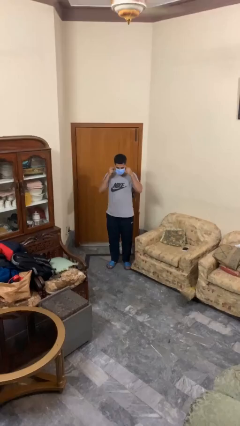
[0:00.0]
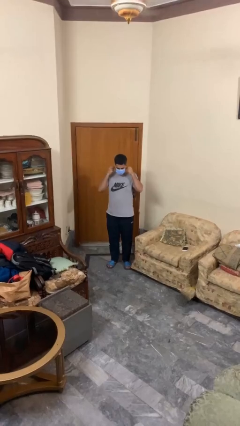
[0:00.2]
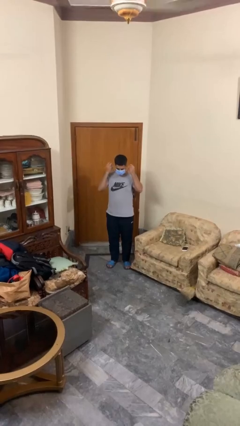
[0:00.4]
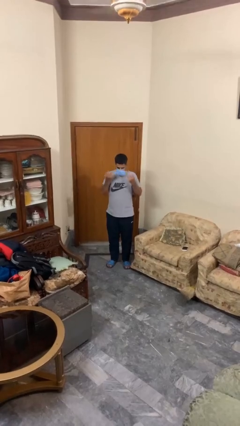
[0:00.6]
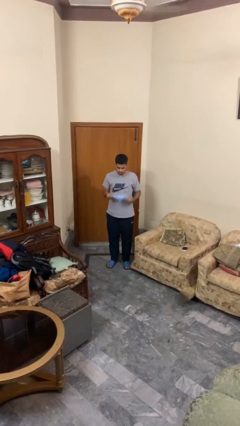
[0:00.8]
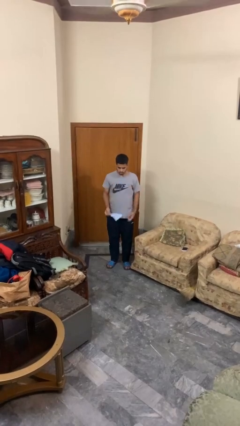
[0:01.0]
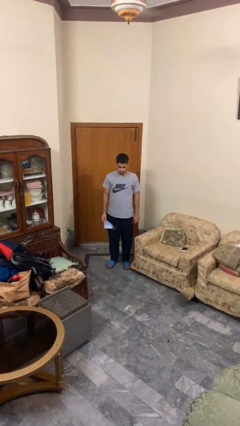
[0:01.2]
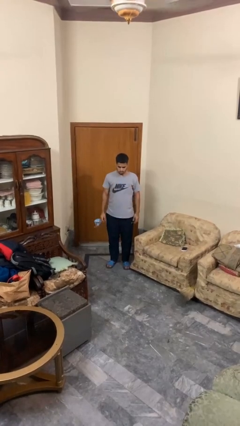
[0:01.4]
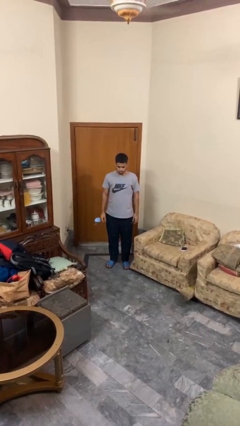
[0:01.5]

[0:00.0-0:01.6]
person takes off facemask

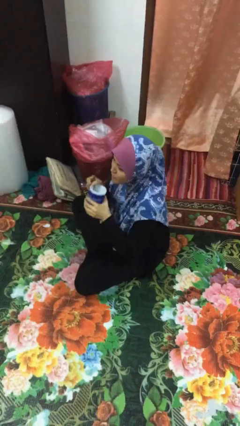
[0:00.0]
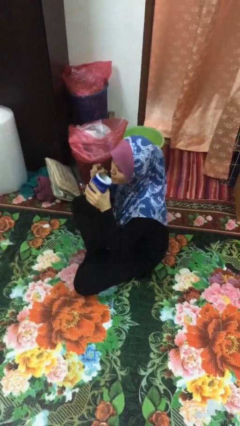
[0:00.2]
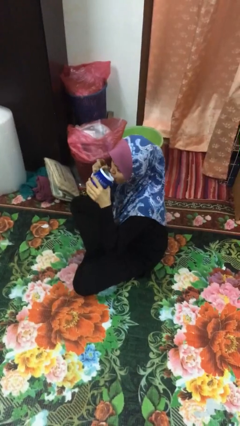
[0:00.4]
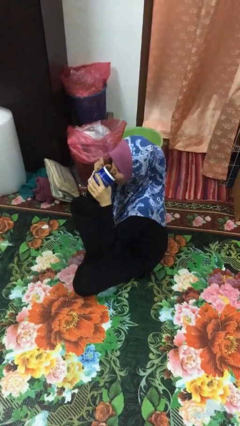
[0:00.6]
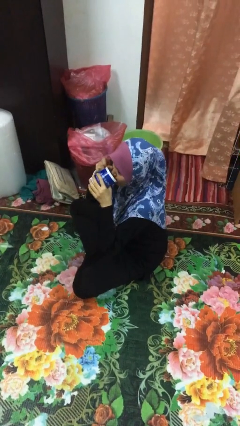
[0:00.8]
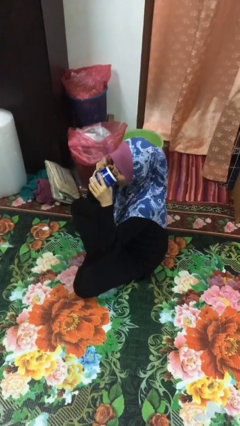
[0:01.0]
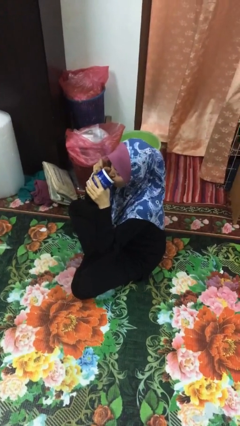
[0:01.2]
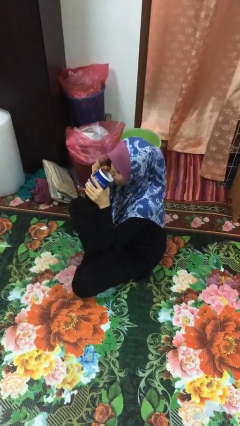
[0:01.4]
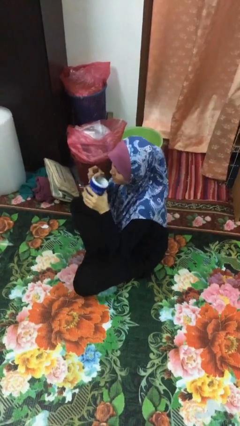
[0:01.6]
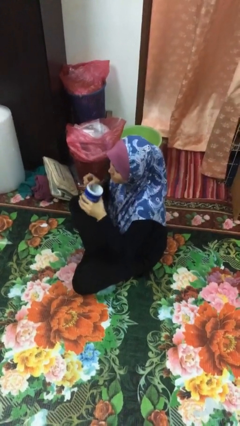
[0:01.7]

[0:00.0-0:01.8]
person drinks from mug

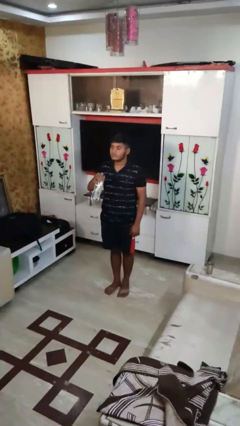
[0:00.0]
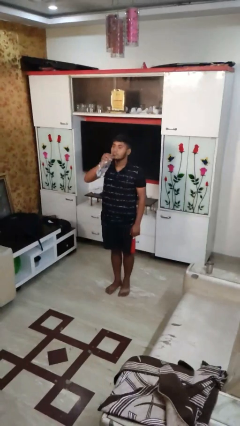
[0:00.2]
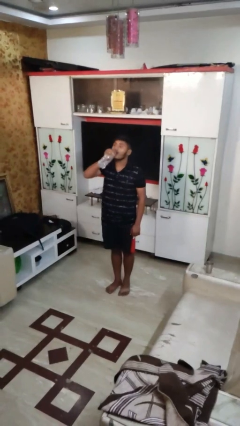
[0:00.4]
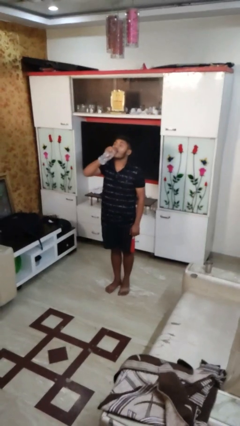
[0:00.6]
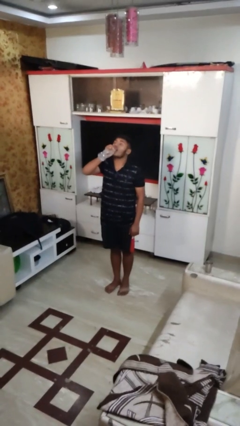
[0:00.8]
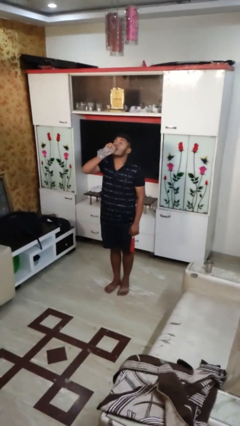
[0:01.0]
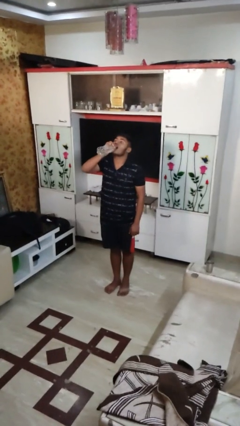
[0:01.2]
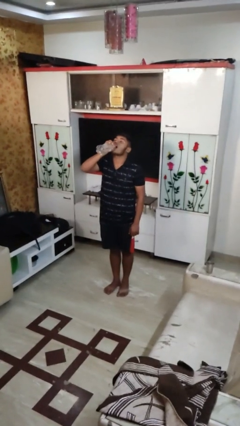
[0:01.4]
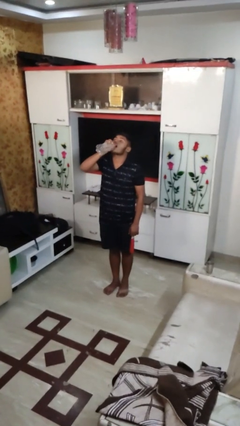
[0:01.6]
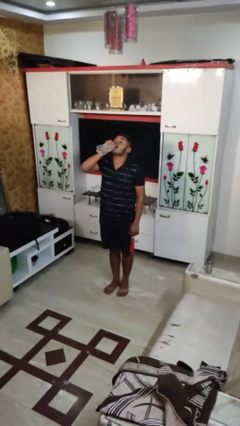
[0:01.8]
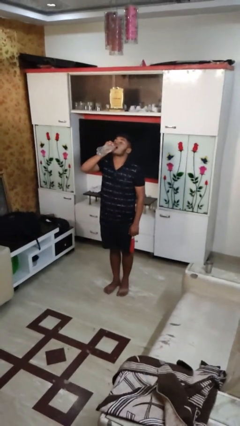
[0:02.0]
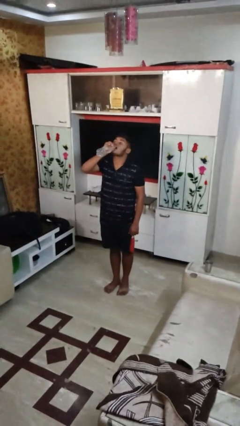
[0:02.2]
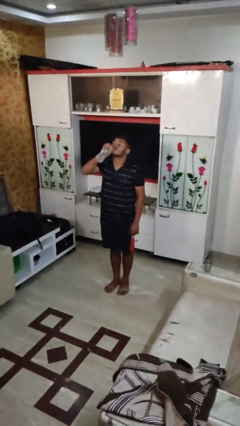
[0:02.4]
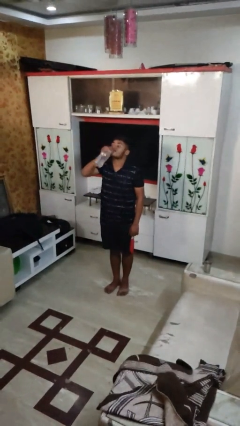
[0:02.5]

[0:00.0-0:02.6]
person drinks from bottle

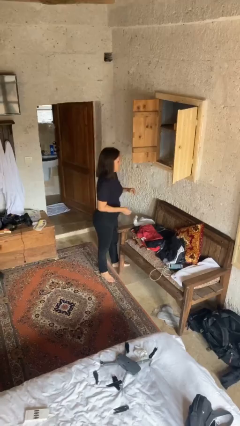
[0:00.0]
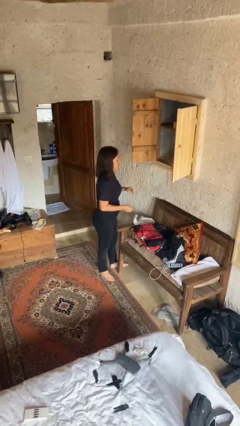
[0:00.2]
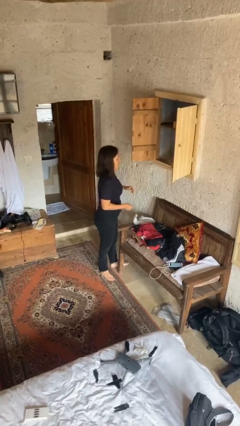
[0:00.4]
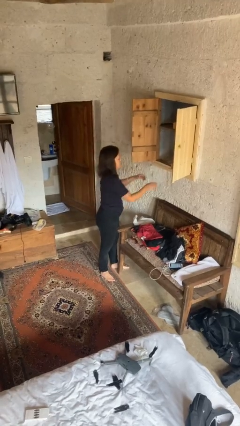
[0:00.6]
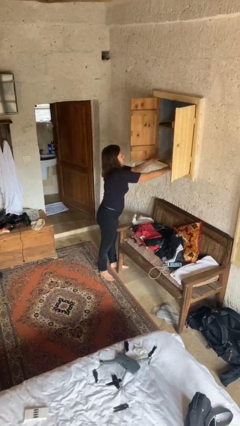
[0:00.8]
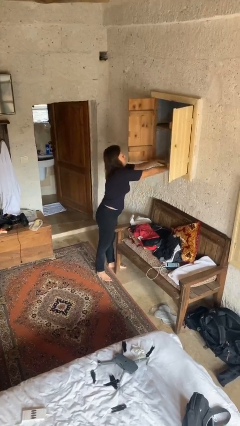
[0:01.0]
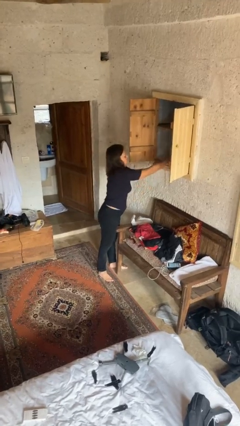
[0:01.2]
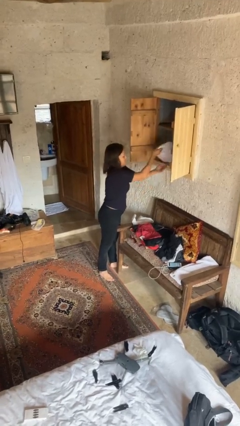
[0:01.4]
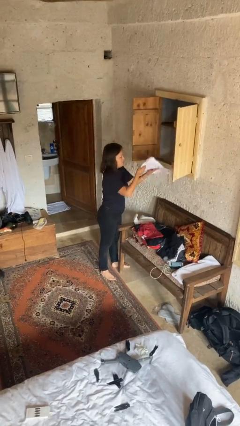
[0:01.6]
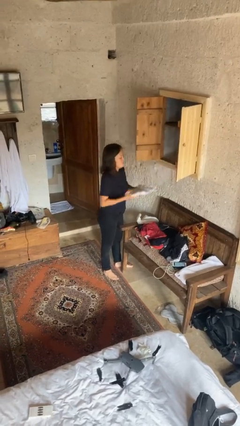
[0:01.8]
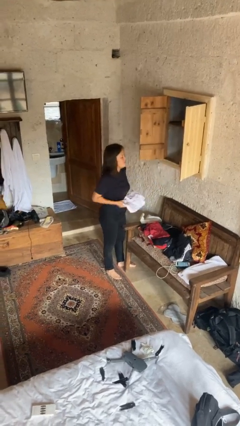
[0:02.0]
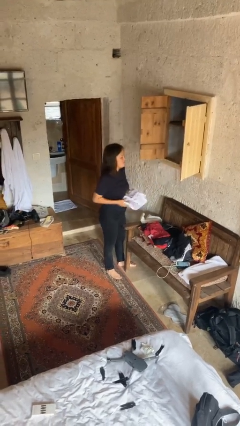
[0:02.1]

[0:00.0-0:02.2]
person takes clothes from dresser

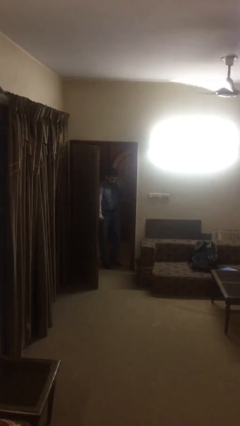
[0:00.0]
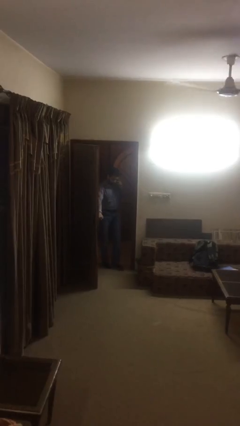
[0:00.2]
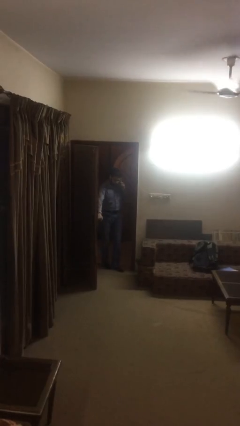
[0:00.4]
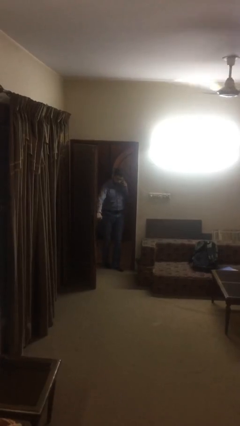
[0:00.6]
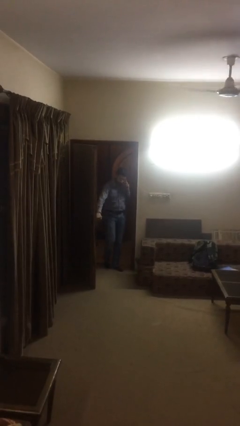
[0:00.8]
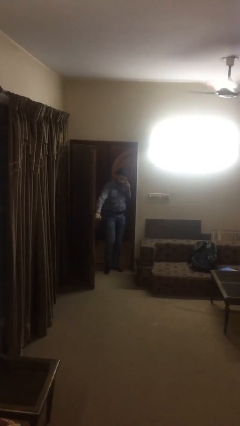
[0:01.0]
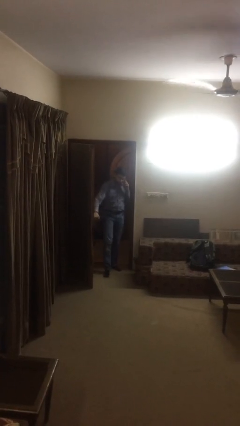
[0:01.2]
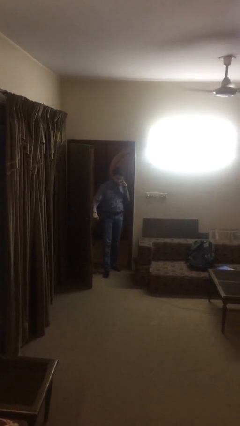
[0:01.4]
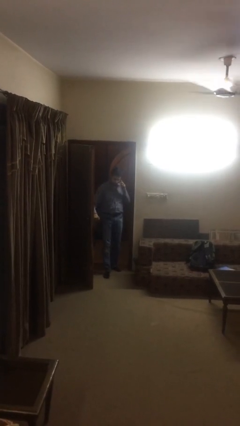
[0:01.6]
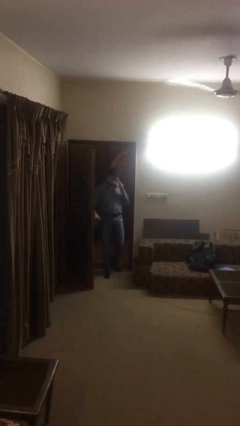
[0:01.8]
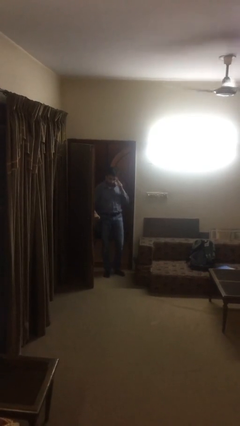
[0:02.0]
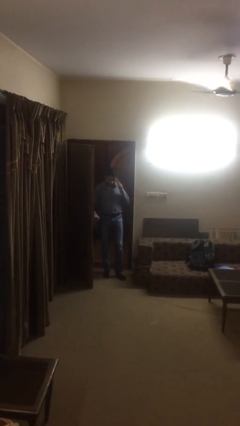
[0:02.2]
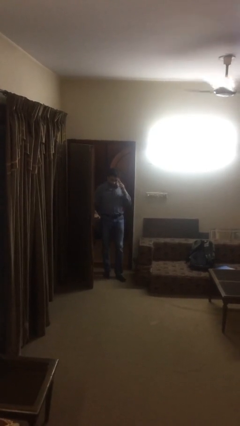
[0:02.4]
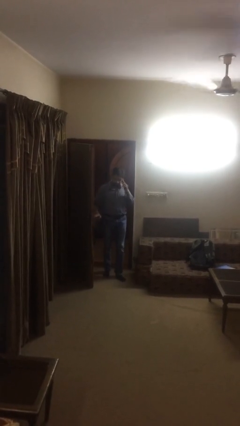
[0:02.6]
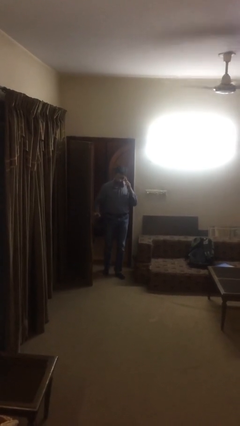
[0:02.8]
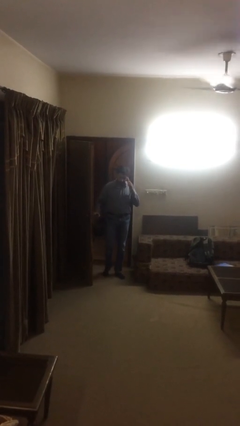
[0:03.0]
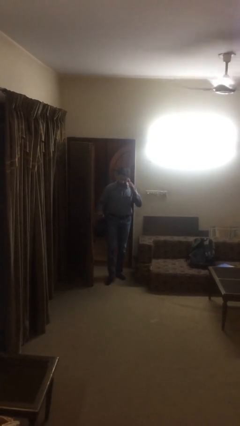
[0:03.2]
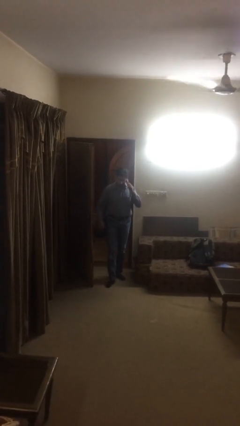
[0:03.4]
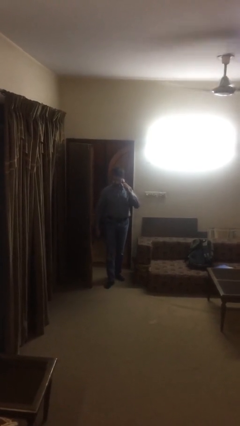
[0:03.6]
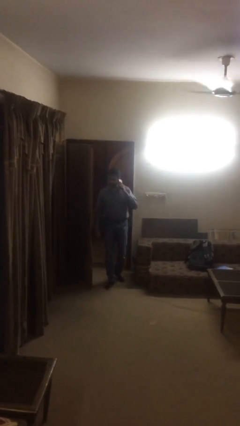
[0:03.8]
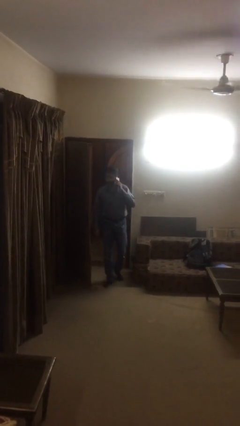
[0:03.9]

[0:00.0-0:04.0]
person enters scene through structure

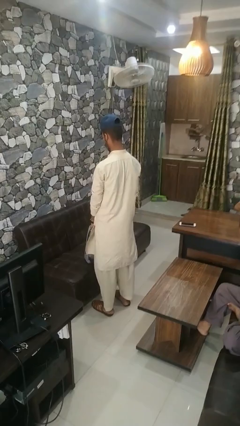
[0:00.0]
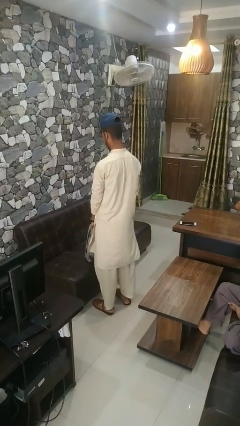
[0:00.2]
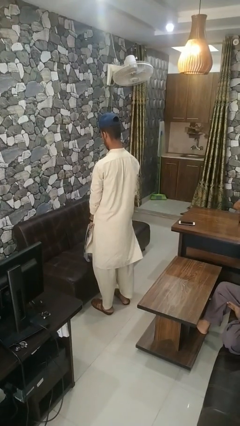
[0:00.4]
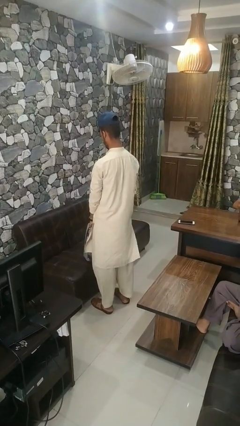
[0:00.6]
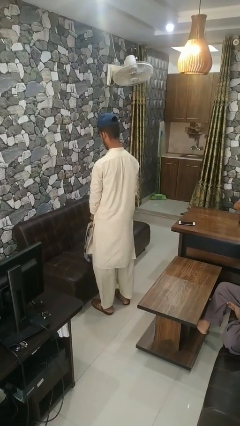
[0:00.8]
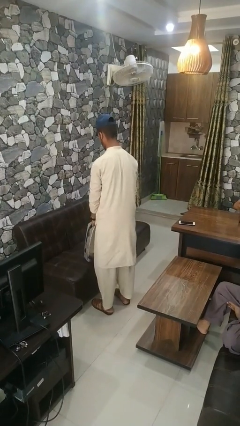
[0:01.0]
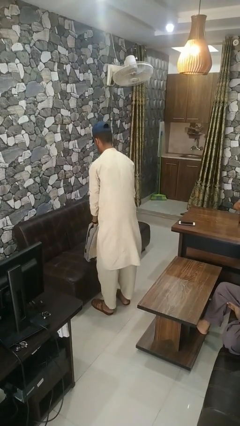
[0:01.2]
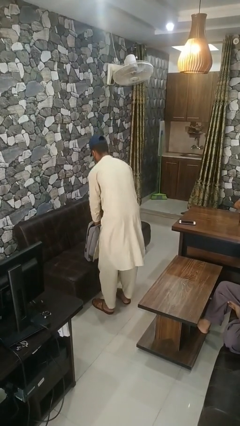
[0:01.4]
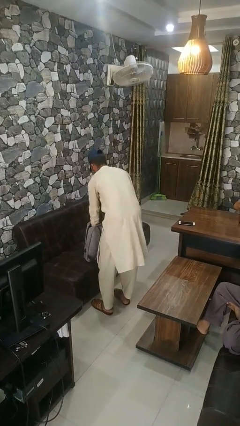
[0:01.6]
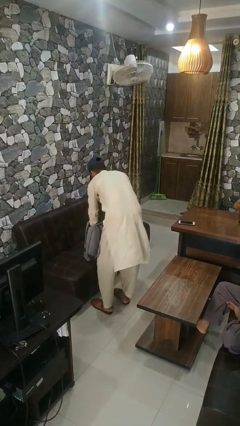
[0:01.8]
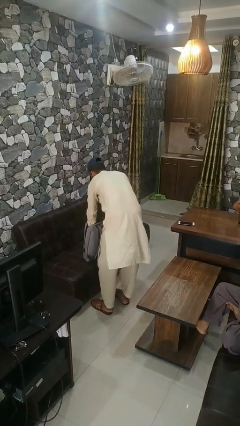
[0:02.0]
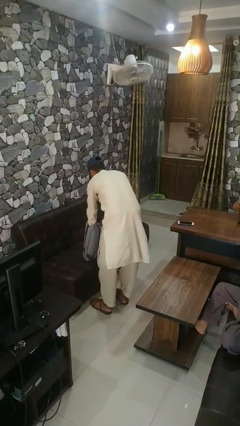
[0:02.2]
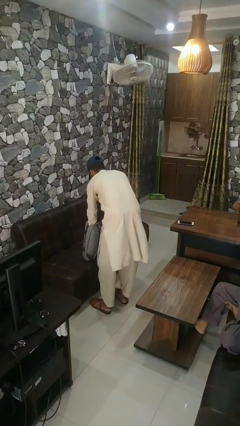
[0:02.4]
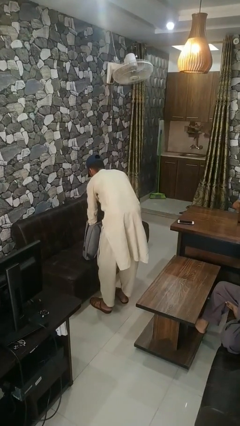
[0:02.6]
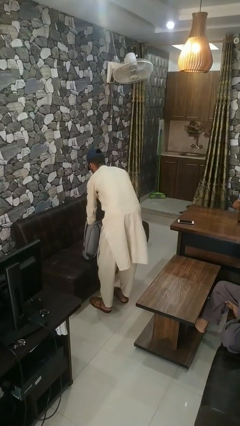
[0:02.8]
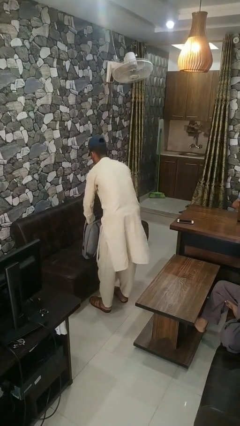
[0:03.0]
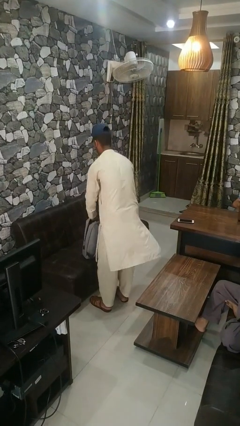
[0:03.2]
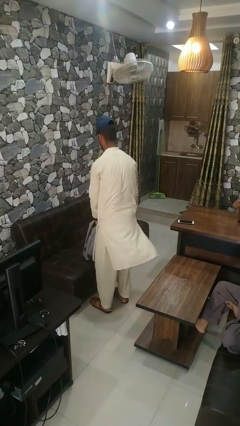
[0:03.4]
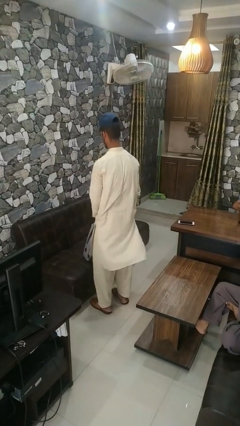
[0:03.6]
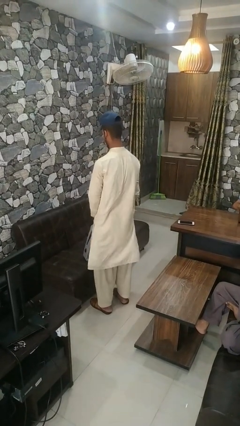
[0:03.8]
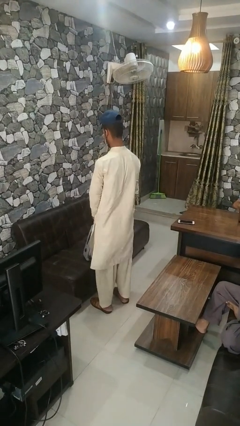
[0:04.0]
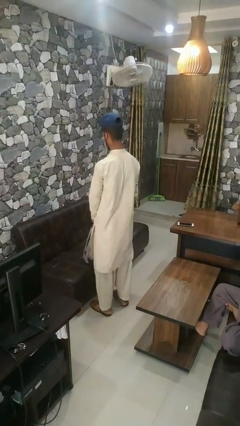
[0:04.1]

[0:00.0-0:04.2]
person searches in bag

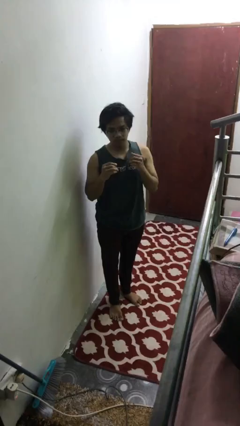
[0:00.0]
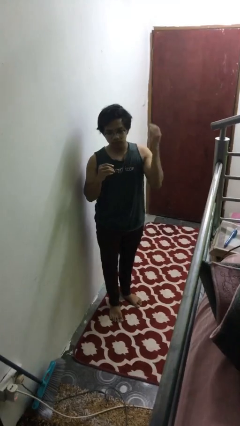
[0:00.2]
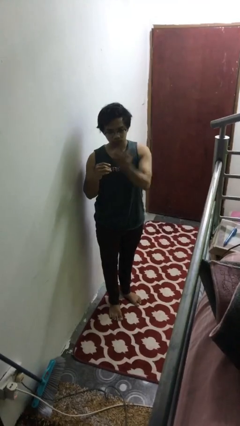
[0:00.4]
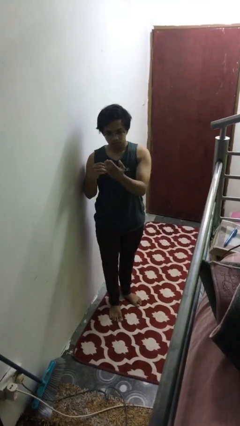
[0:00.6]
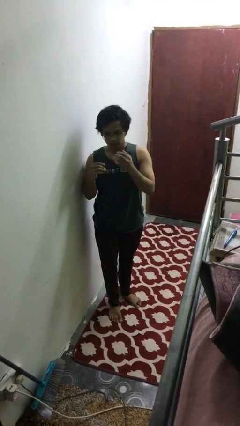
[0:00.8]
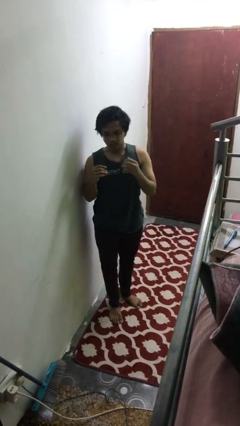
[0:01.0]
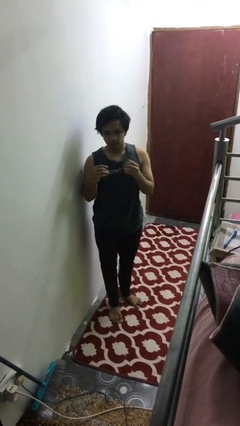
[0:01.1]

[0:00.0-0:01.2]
person karate chop
